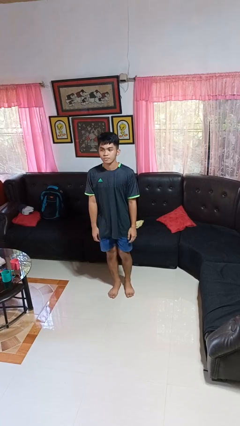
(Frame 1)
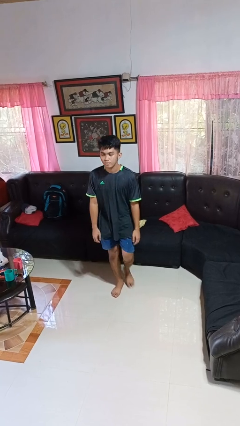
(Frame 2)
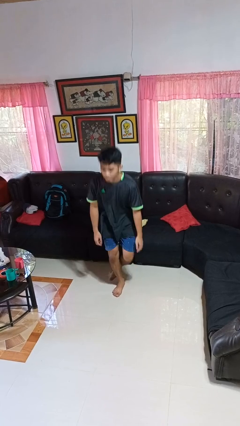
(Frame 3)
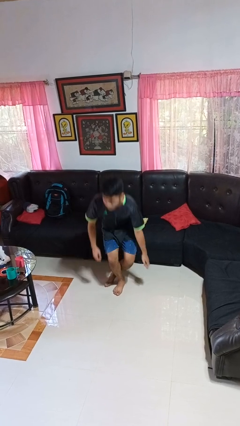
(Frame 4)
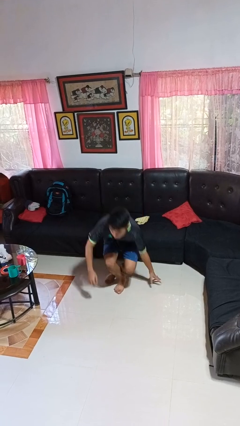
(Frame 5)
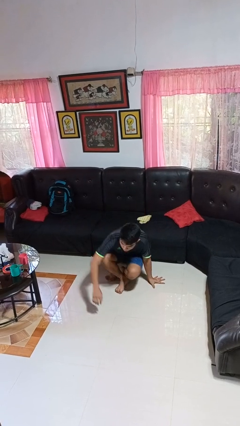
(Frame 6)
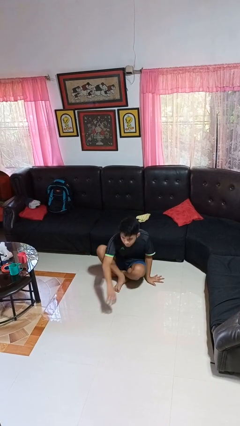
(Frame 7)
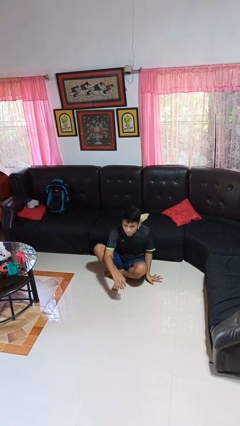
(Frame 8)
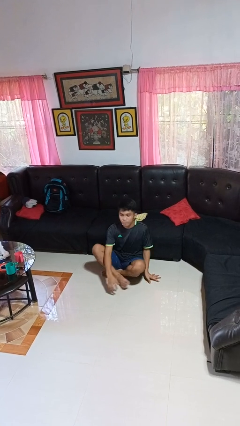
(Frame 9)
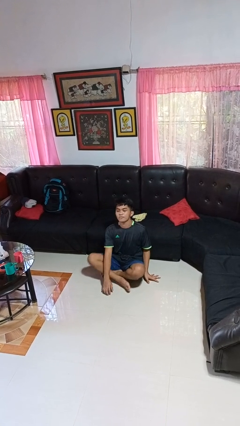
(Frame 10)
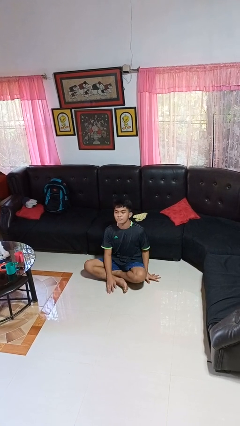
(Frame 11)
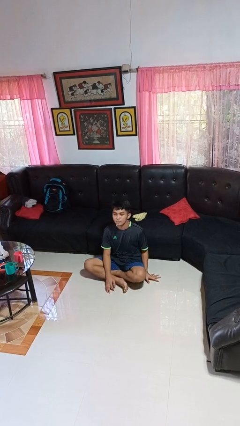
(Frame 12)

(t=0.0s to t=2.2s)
person sits crisscross

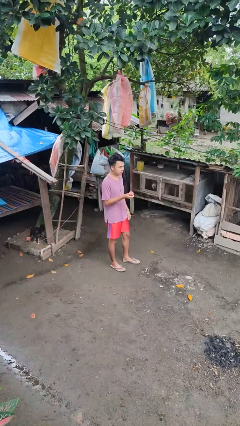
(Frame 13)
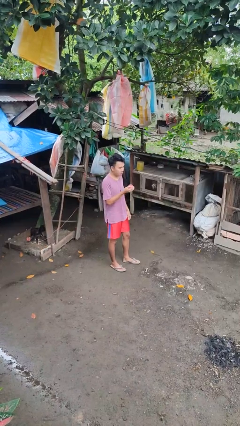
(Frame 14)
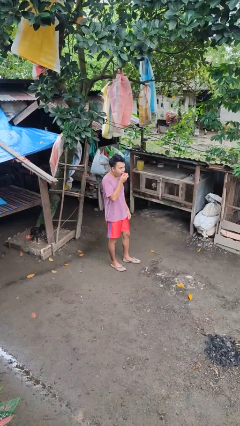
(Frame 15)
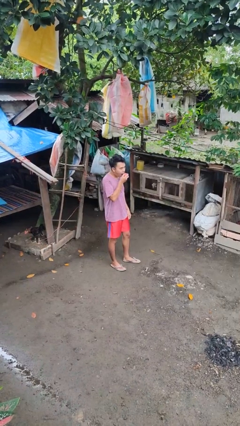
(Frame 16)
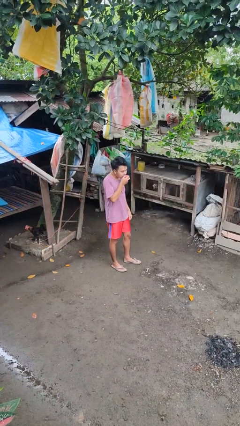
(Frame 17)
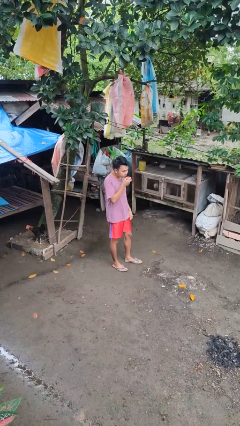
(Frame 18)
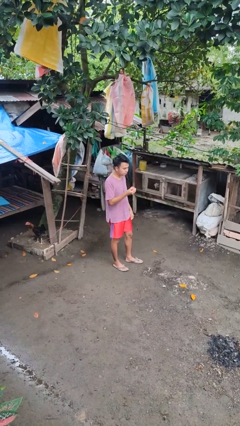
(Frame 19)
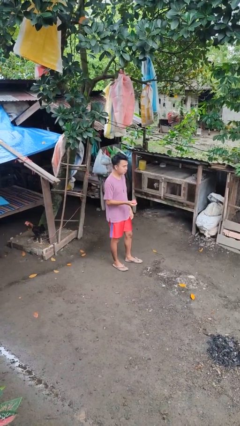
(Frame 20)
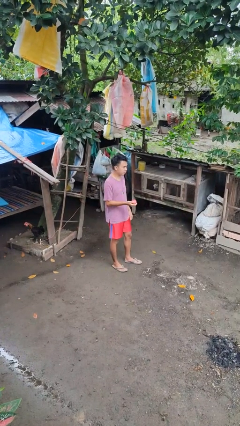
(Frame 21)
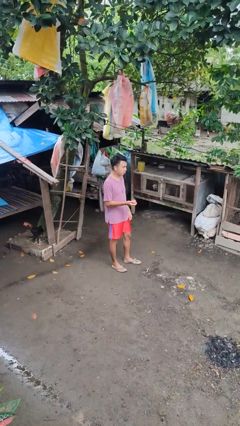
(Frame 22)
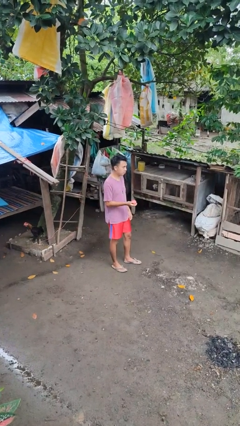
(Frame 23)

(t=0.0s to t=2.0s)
person eats apple

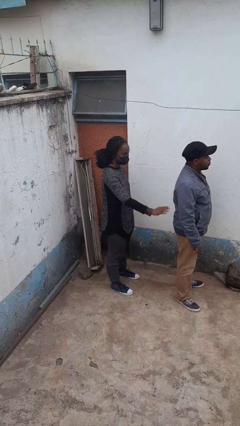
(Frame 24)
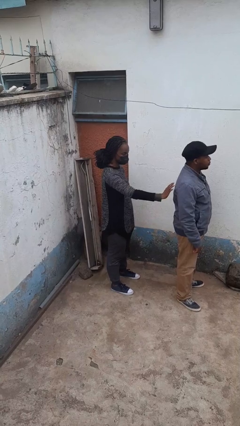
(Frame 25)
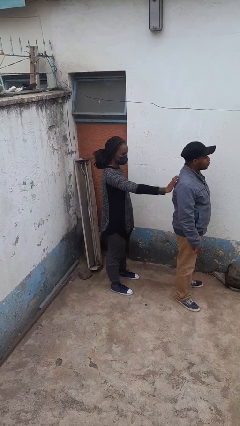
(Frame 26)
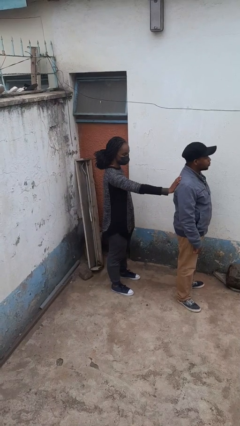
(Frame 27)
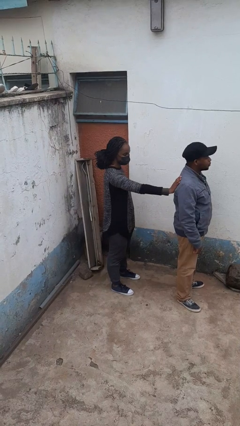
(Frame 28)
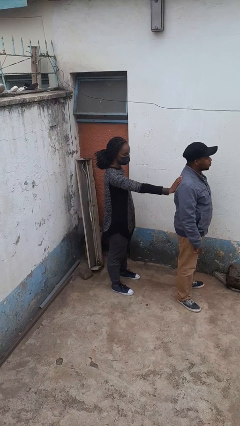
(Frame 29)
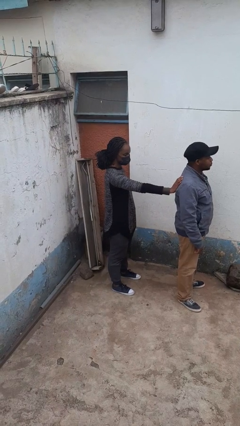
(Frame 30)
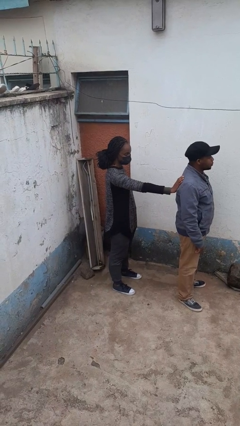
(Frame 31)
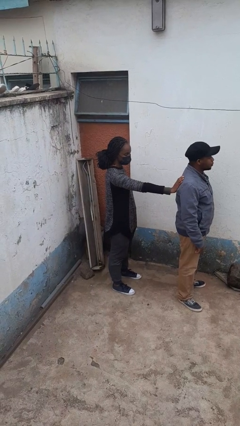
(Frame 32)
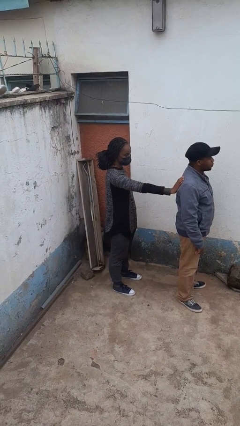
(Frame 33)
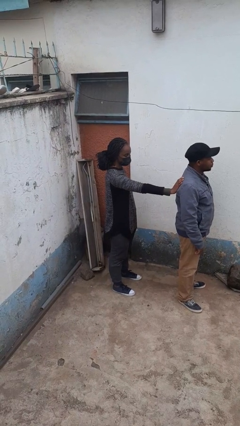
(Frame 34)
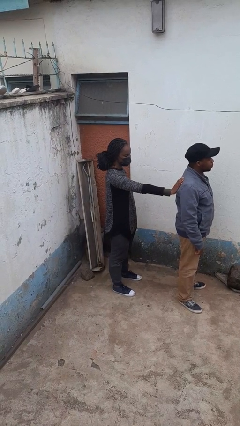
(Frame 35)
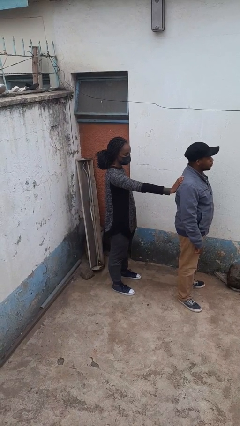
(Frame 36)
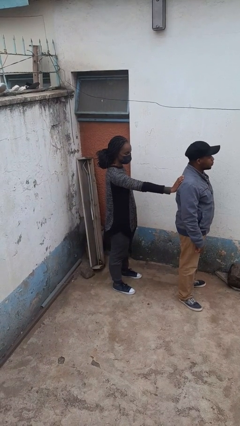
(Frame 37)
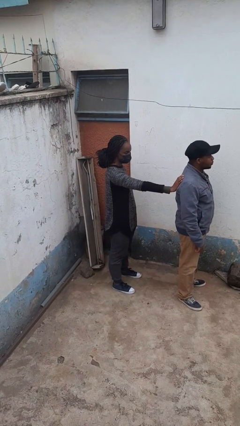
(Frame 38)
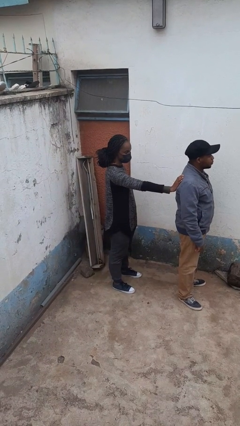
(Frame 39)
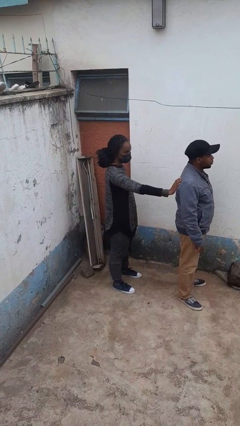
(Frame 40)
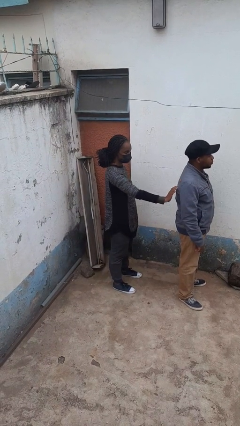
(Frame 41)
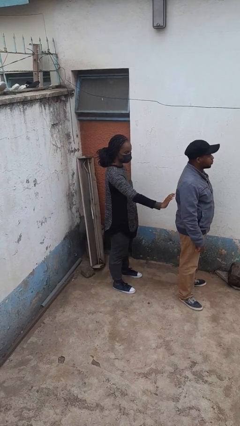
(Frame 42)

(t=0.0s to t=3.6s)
person touches back of person

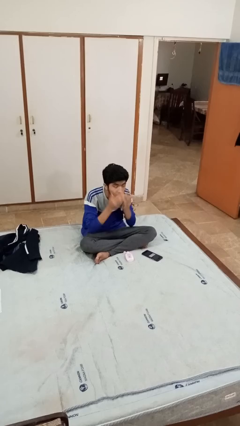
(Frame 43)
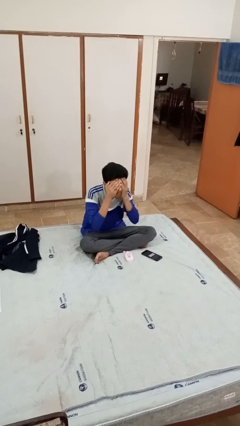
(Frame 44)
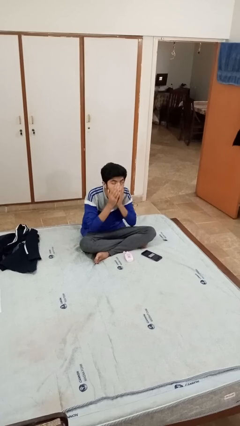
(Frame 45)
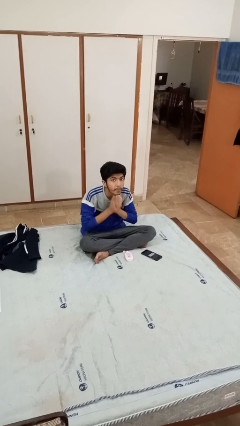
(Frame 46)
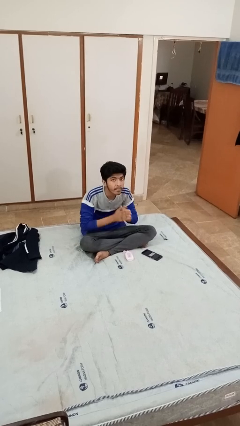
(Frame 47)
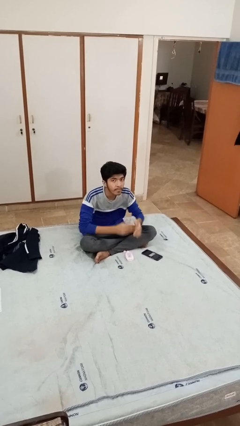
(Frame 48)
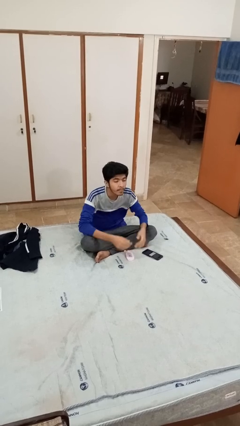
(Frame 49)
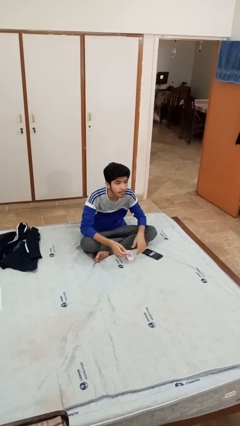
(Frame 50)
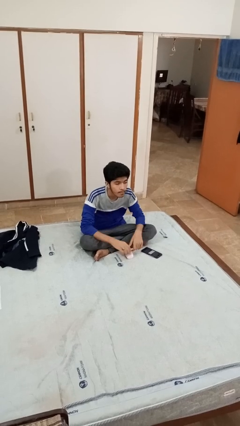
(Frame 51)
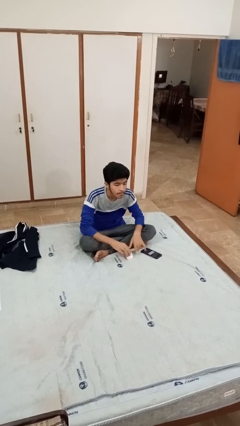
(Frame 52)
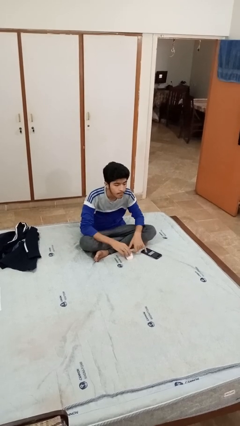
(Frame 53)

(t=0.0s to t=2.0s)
person applies facial moisturizer

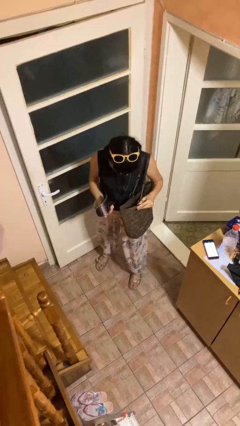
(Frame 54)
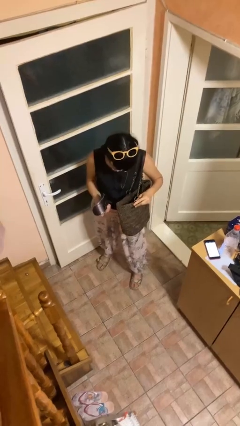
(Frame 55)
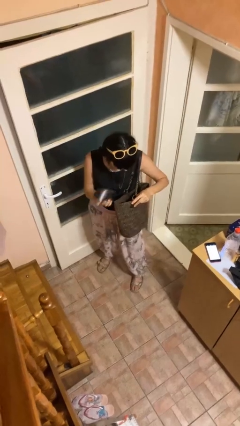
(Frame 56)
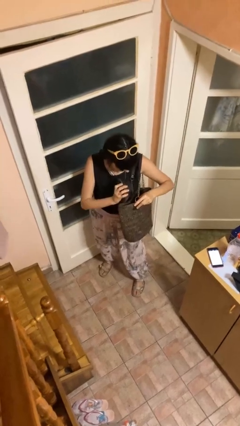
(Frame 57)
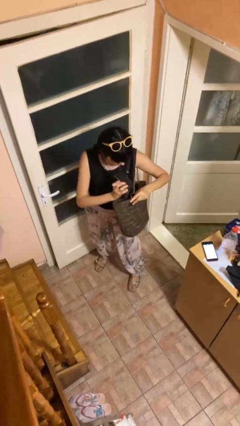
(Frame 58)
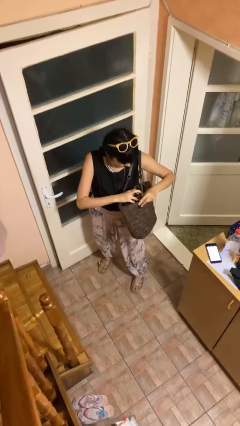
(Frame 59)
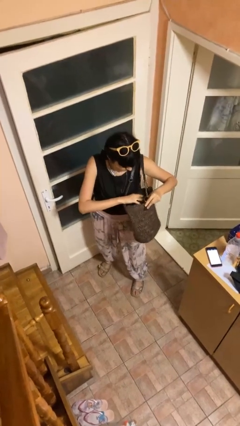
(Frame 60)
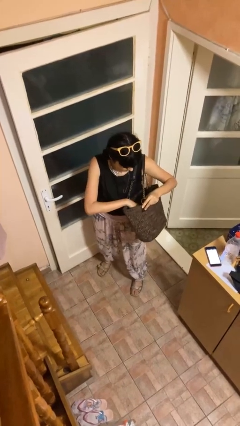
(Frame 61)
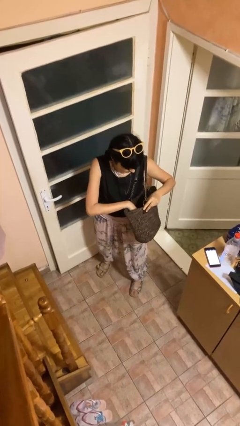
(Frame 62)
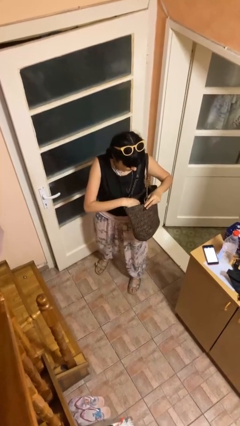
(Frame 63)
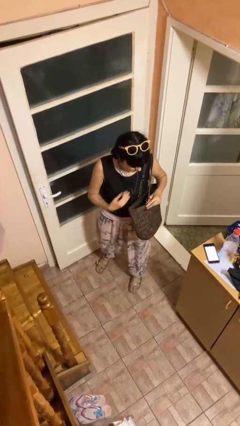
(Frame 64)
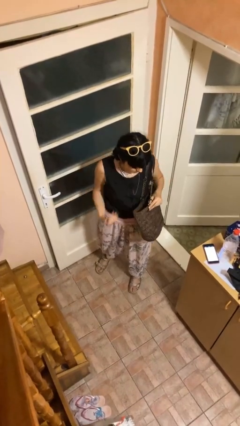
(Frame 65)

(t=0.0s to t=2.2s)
person puts object into purse

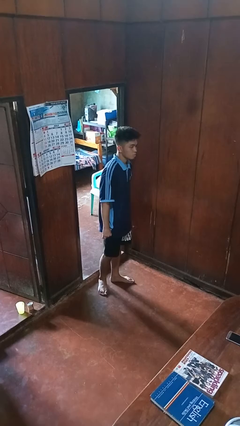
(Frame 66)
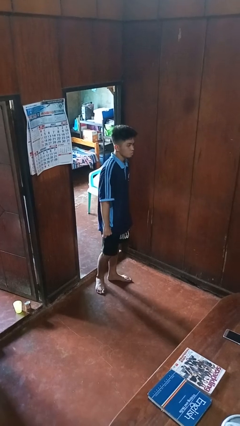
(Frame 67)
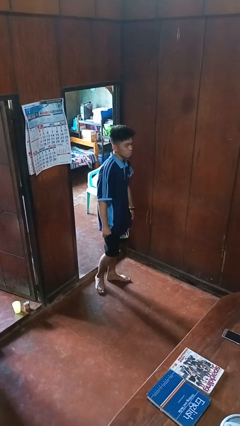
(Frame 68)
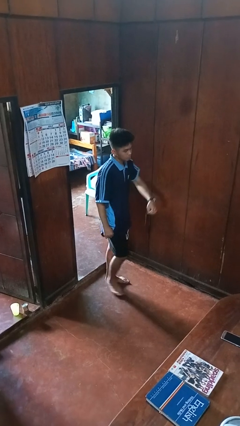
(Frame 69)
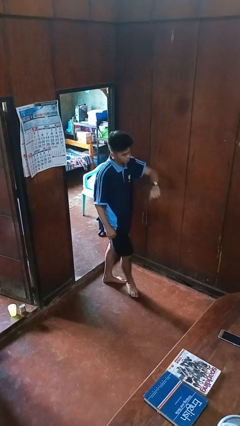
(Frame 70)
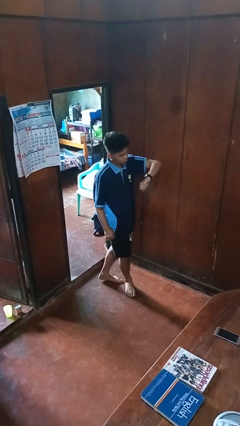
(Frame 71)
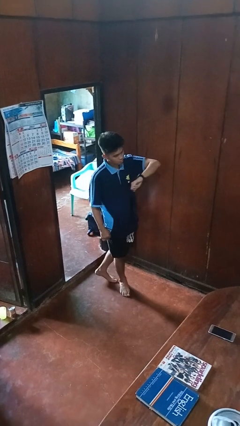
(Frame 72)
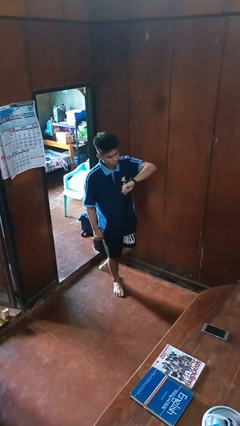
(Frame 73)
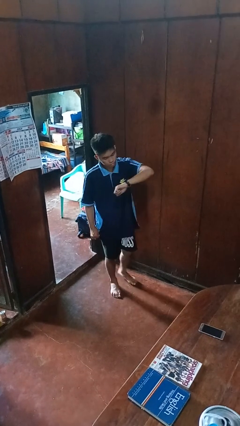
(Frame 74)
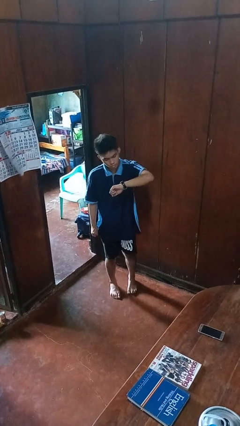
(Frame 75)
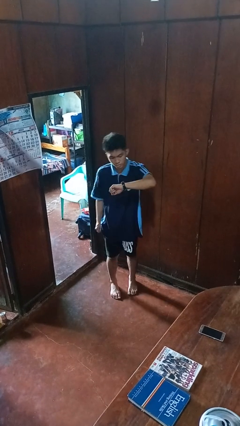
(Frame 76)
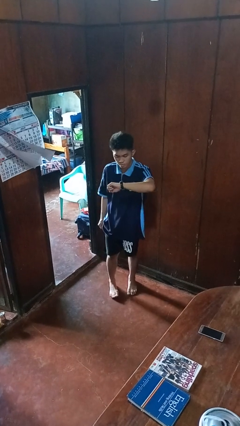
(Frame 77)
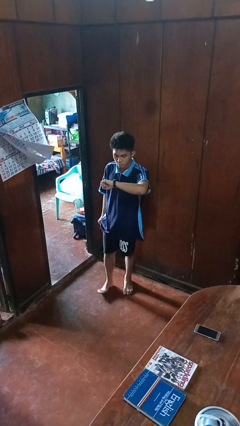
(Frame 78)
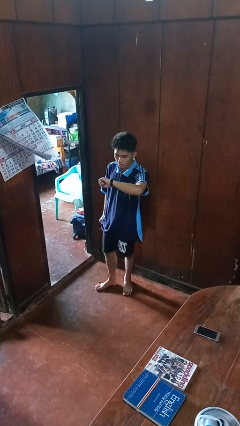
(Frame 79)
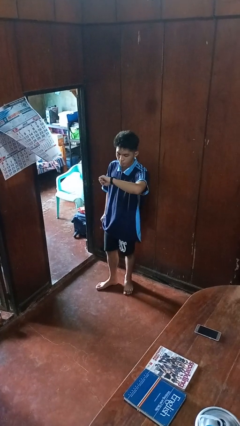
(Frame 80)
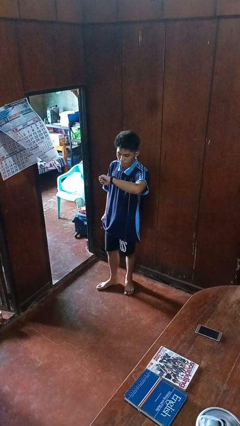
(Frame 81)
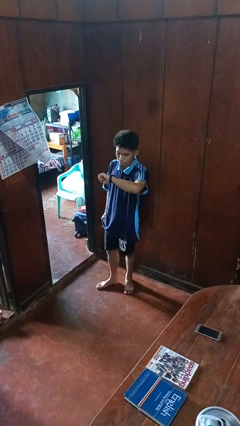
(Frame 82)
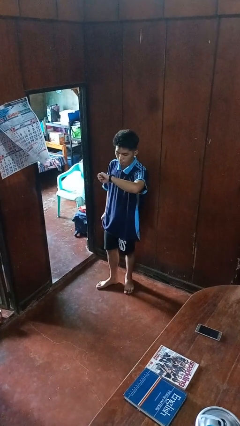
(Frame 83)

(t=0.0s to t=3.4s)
person looks at wristwatch

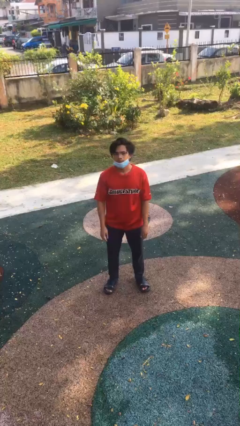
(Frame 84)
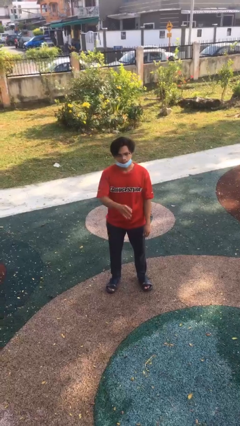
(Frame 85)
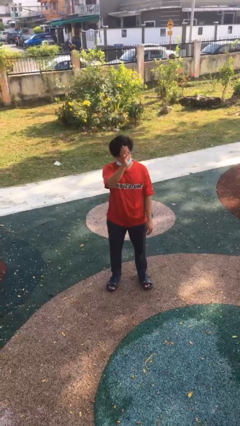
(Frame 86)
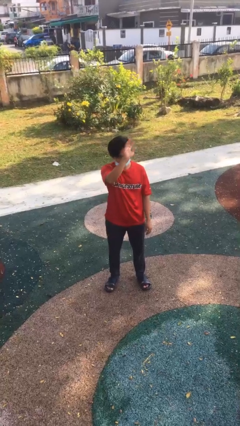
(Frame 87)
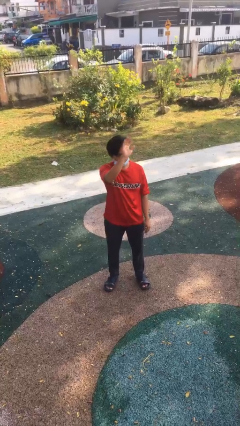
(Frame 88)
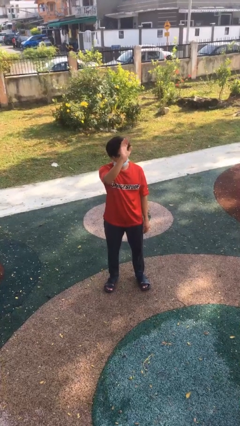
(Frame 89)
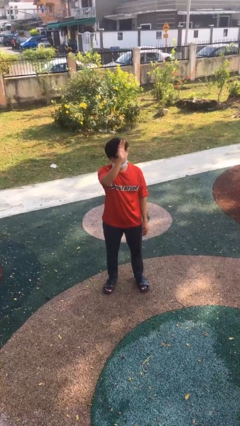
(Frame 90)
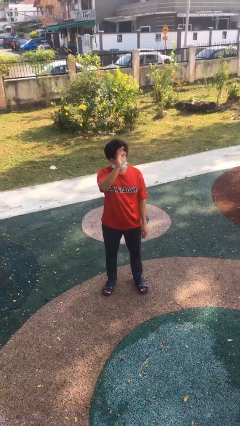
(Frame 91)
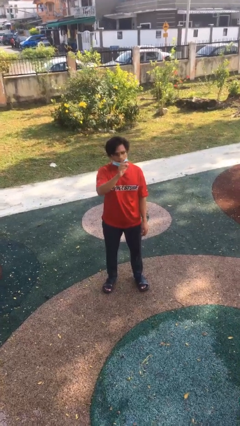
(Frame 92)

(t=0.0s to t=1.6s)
person waves at person
